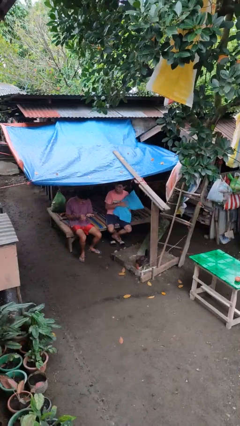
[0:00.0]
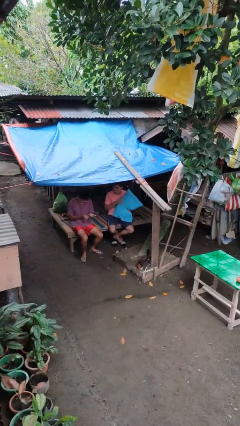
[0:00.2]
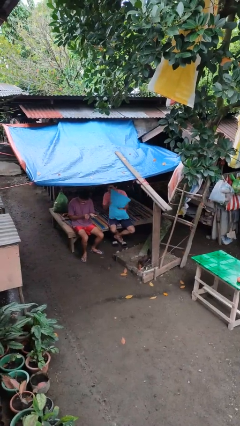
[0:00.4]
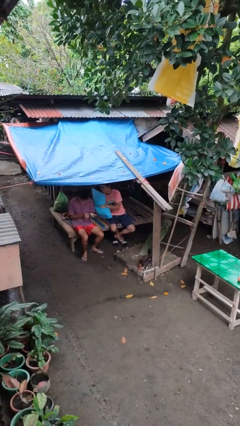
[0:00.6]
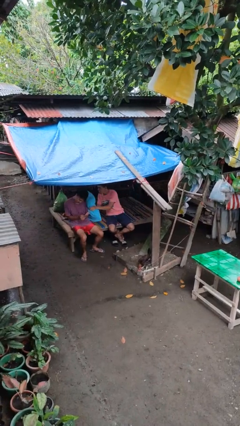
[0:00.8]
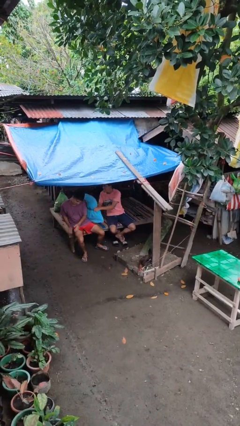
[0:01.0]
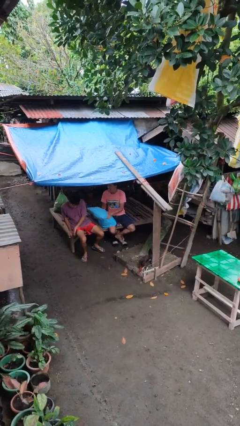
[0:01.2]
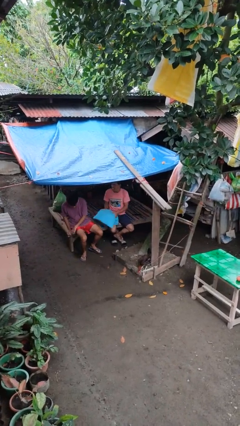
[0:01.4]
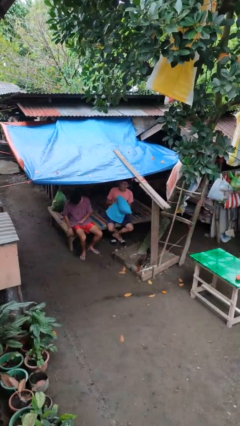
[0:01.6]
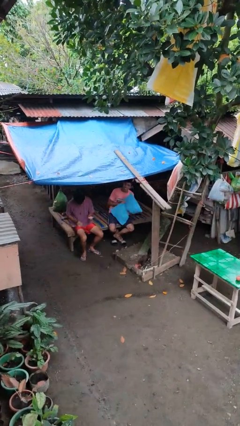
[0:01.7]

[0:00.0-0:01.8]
person hits person with pillow

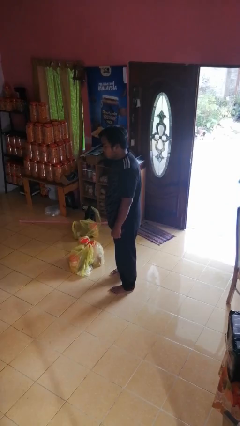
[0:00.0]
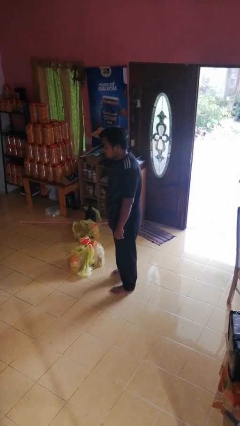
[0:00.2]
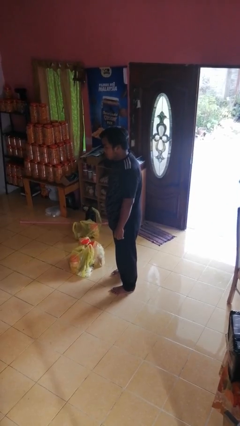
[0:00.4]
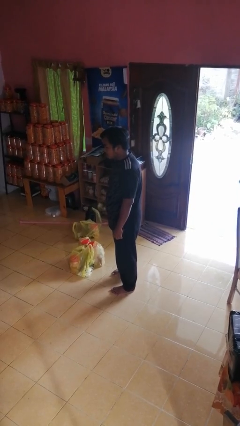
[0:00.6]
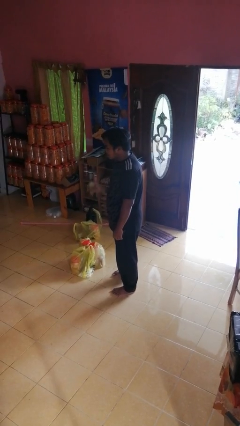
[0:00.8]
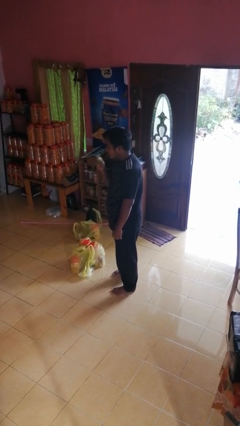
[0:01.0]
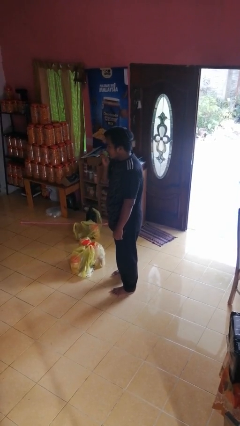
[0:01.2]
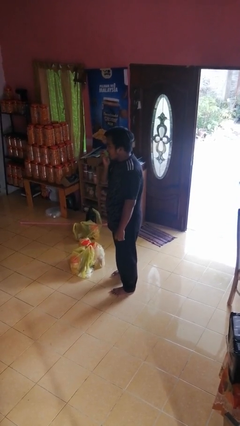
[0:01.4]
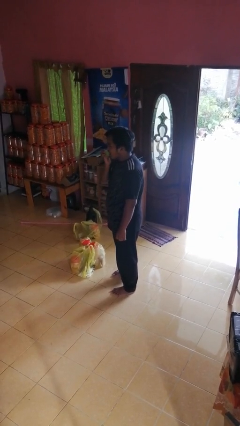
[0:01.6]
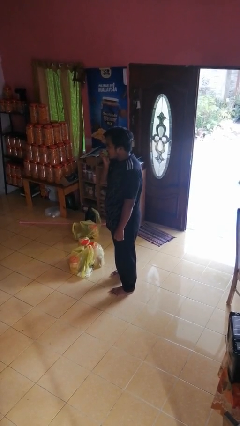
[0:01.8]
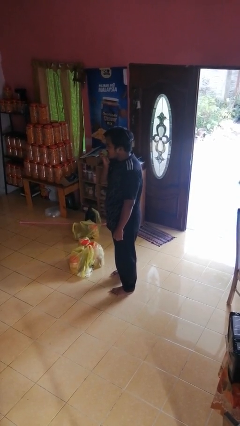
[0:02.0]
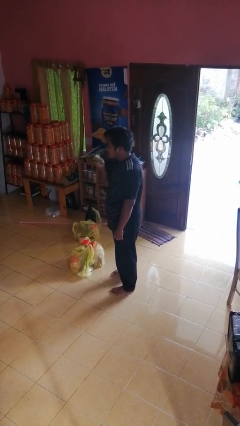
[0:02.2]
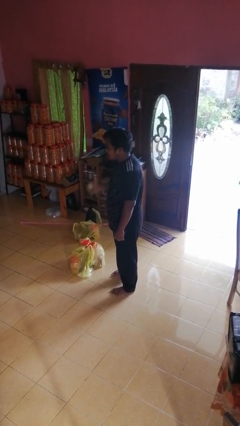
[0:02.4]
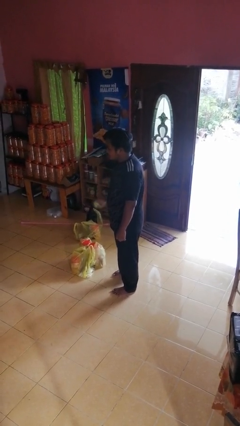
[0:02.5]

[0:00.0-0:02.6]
person eats apple

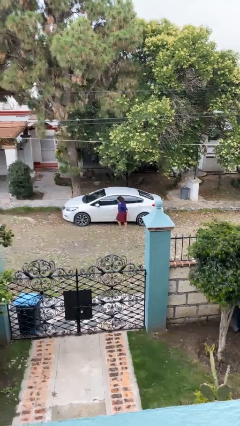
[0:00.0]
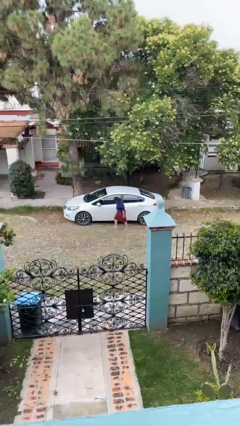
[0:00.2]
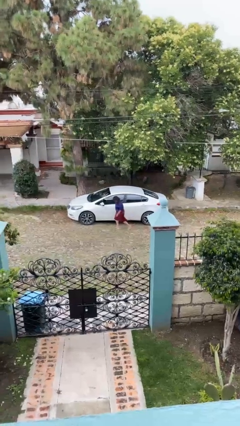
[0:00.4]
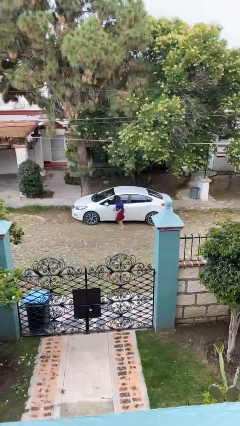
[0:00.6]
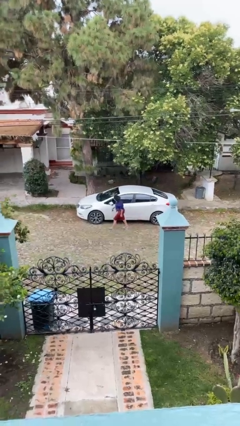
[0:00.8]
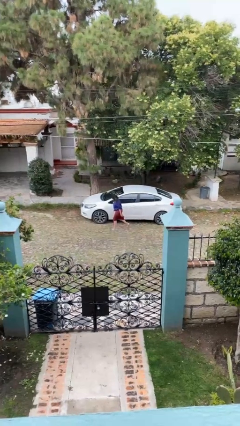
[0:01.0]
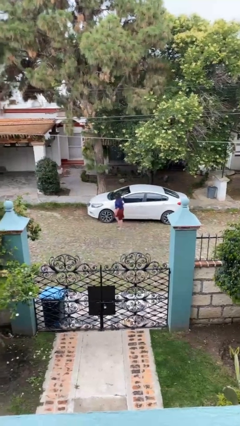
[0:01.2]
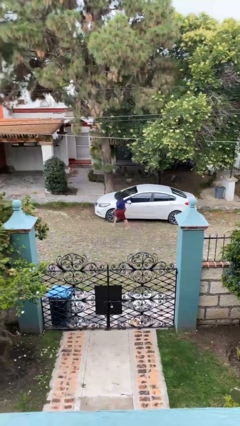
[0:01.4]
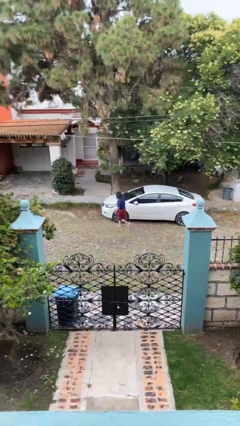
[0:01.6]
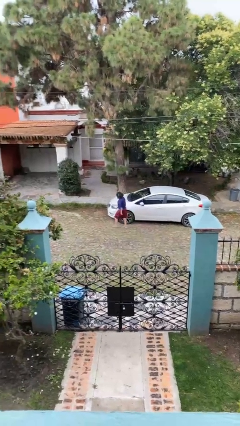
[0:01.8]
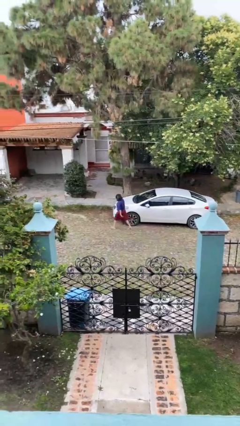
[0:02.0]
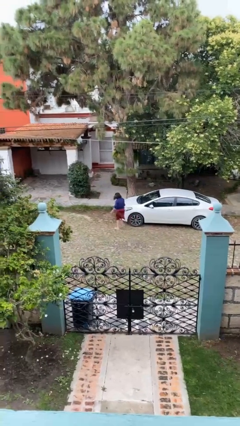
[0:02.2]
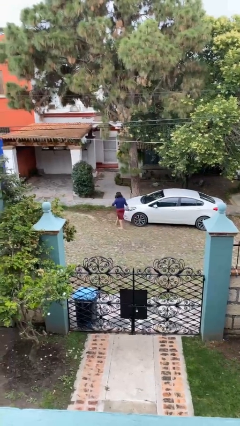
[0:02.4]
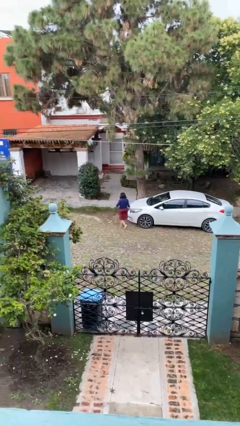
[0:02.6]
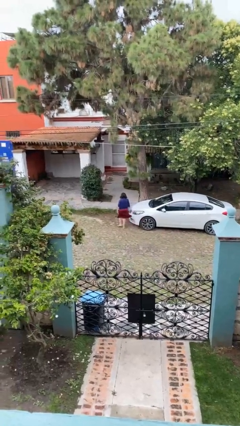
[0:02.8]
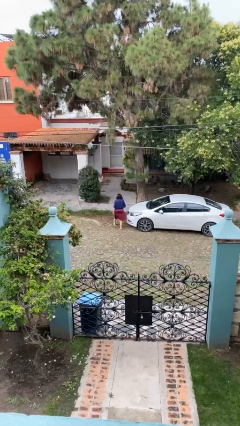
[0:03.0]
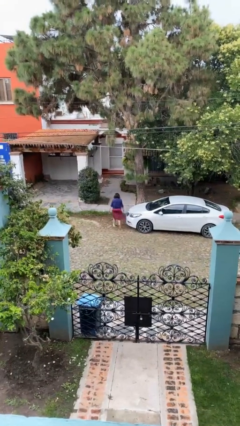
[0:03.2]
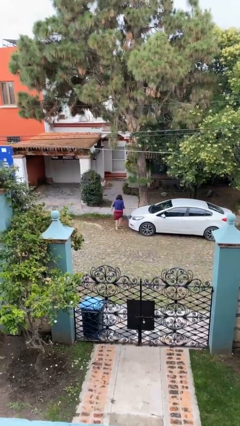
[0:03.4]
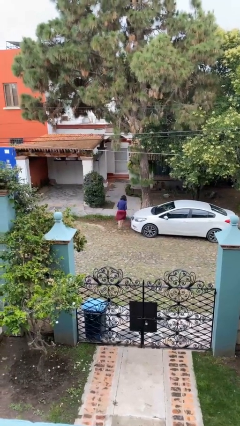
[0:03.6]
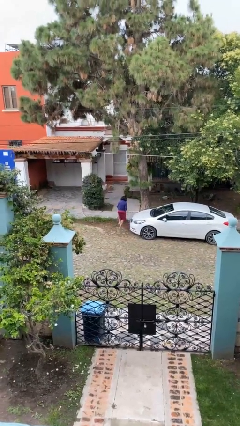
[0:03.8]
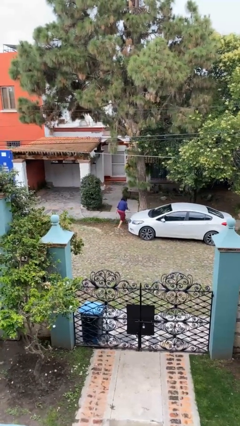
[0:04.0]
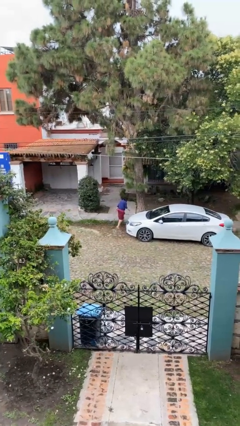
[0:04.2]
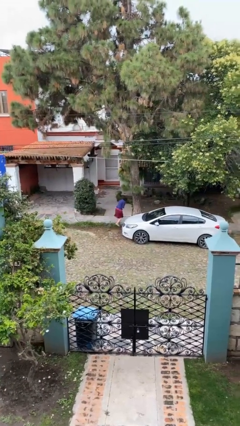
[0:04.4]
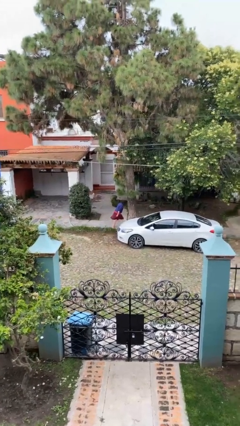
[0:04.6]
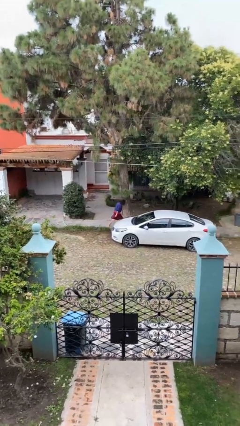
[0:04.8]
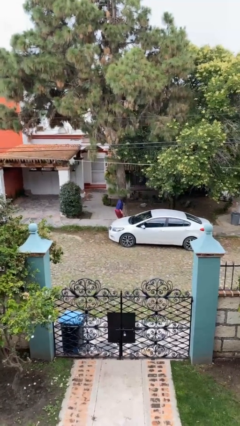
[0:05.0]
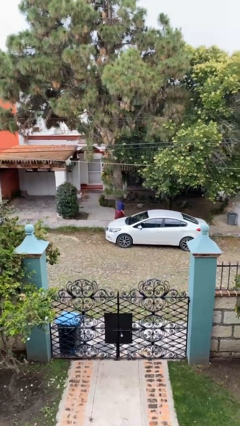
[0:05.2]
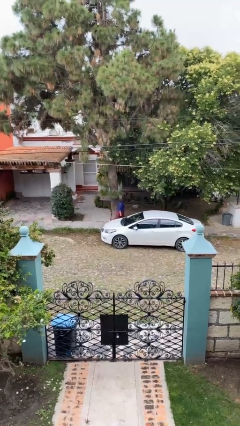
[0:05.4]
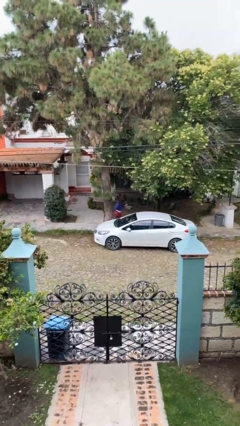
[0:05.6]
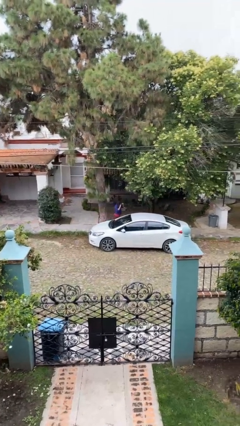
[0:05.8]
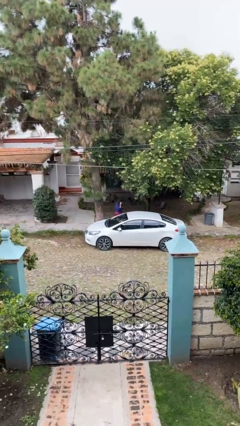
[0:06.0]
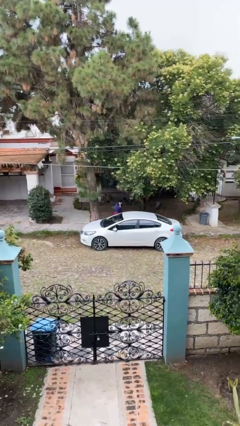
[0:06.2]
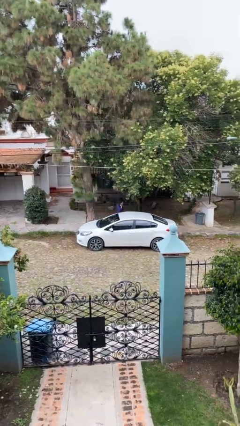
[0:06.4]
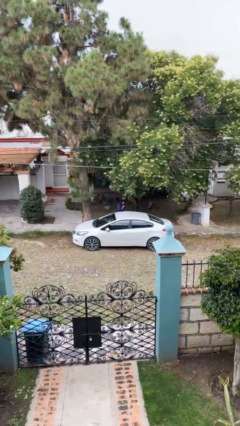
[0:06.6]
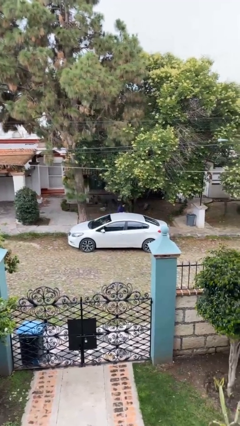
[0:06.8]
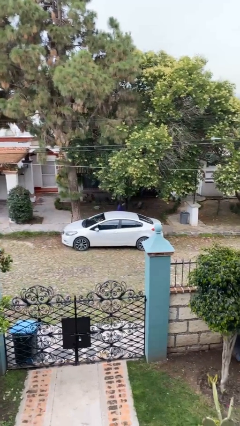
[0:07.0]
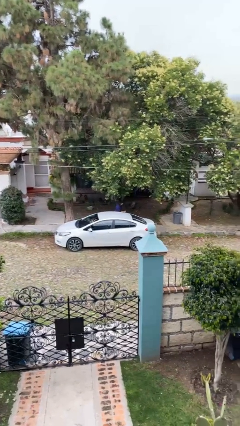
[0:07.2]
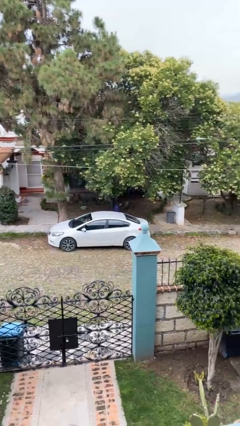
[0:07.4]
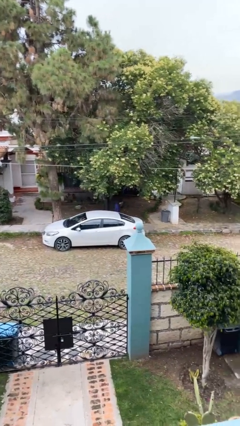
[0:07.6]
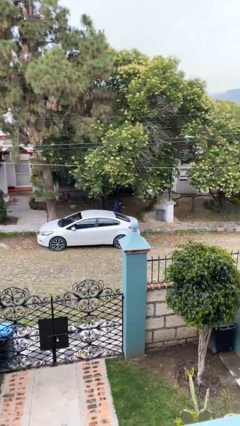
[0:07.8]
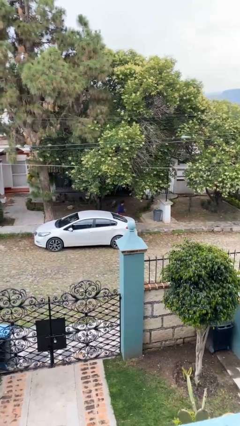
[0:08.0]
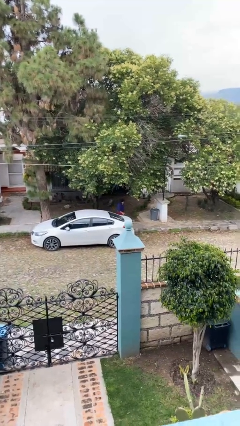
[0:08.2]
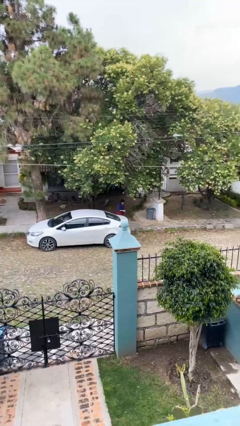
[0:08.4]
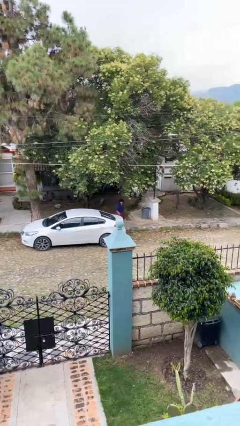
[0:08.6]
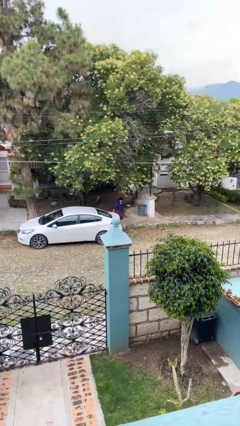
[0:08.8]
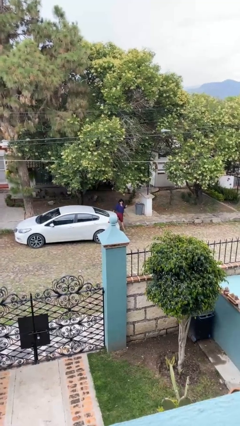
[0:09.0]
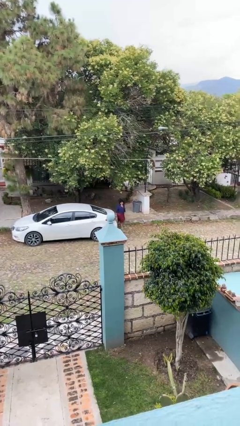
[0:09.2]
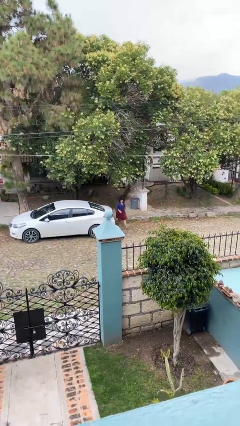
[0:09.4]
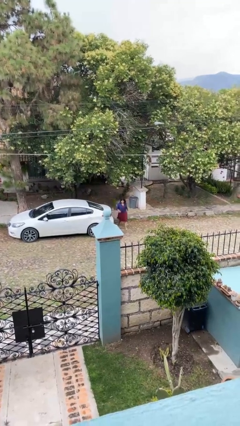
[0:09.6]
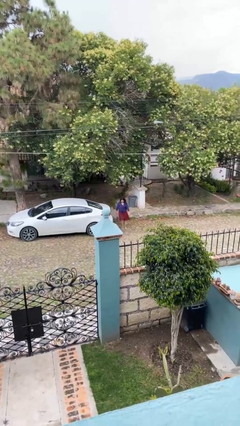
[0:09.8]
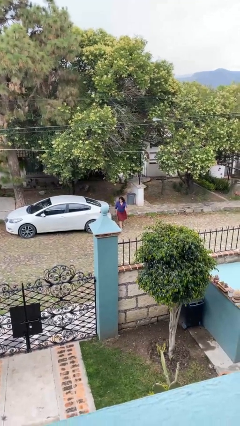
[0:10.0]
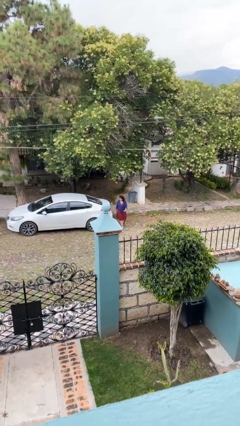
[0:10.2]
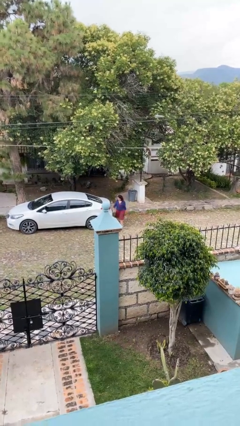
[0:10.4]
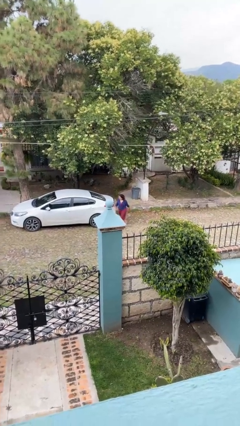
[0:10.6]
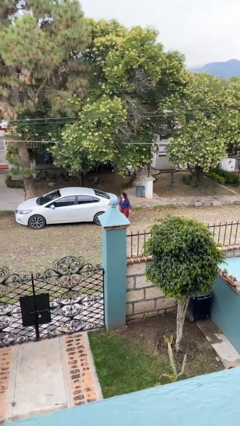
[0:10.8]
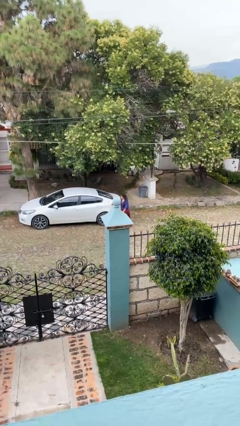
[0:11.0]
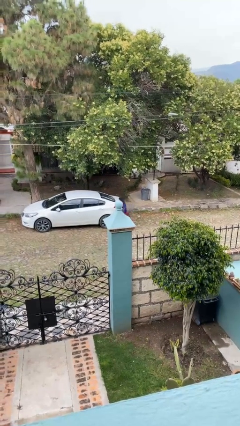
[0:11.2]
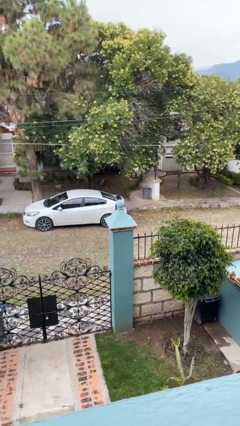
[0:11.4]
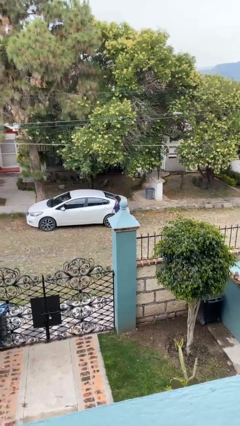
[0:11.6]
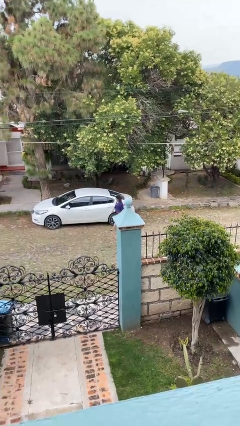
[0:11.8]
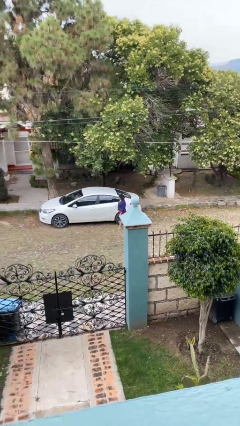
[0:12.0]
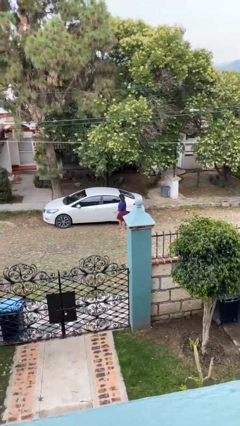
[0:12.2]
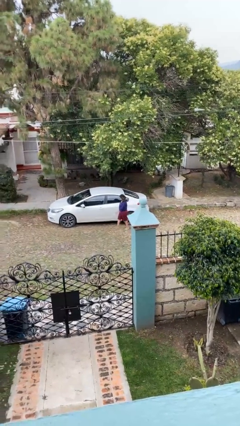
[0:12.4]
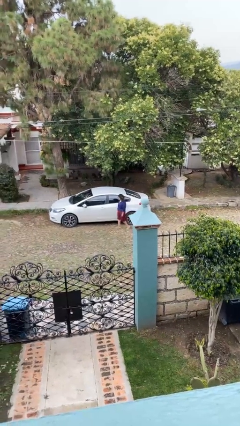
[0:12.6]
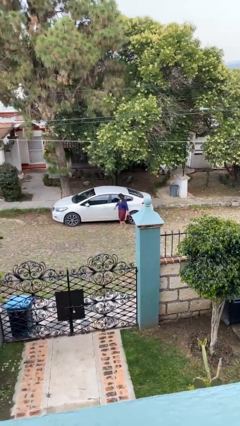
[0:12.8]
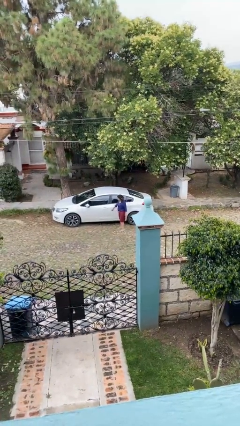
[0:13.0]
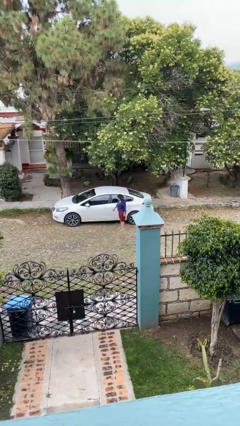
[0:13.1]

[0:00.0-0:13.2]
person walks around car

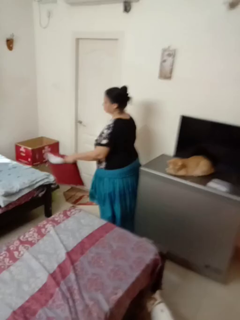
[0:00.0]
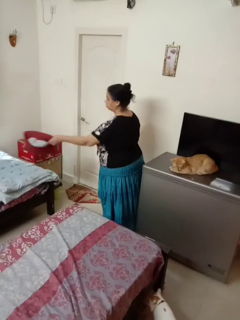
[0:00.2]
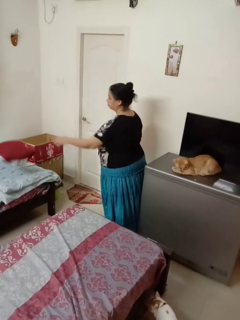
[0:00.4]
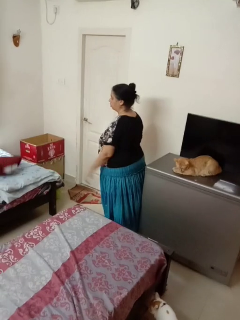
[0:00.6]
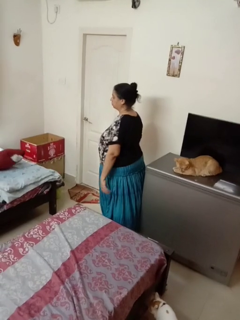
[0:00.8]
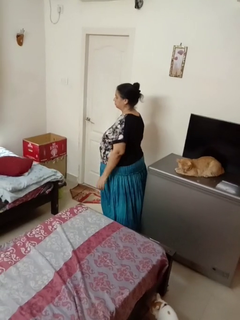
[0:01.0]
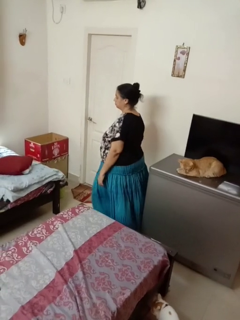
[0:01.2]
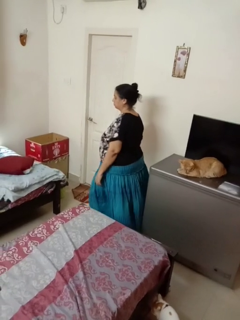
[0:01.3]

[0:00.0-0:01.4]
person throws object on bed
